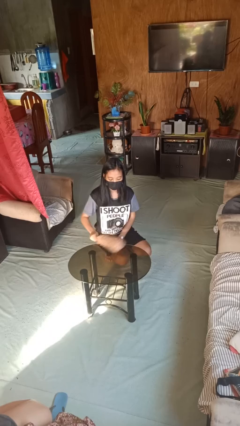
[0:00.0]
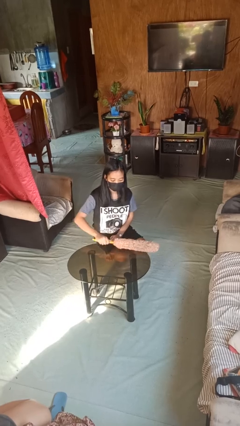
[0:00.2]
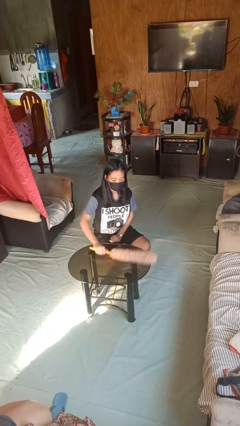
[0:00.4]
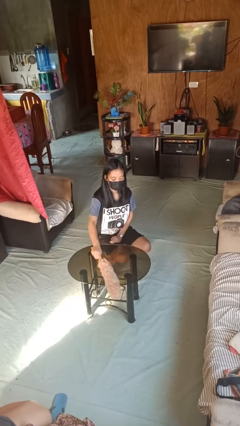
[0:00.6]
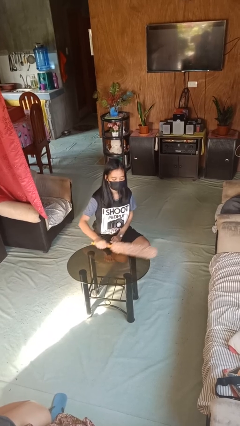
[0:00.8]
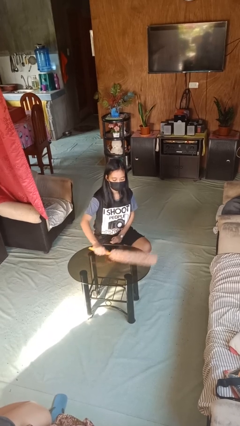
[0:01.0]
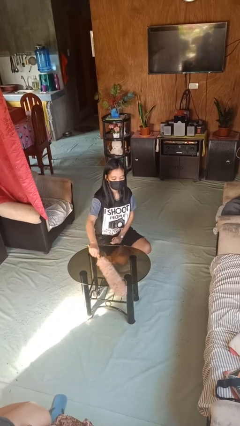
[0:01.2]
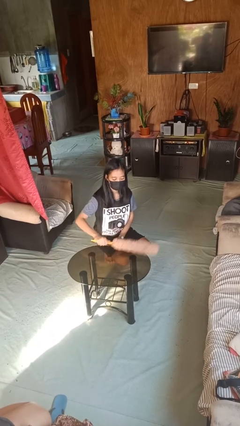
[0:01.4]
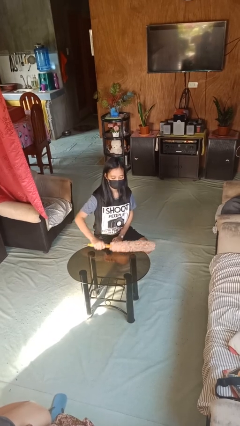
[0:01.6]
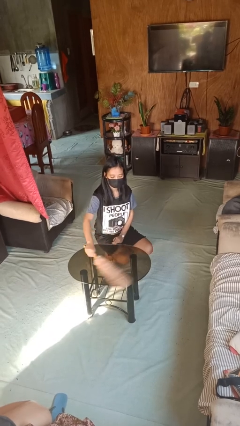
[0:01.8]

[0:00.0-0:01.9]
person dusts furniture

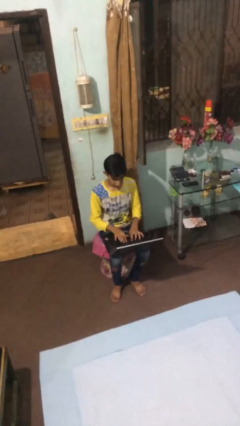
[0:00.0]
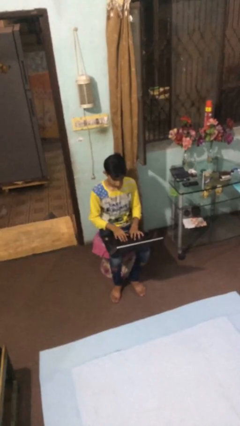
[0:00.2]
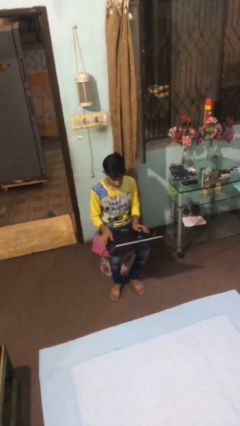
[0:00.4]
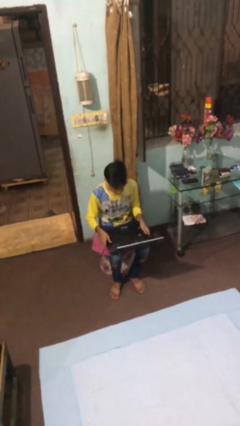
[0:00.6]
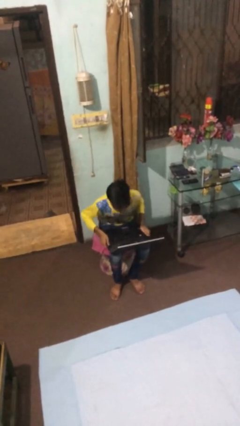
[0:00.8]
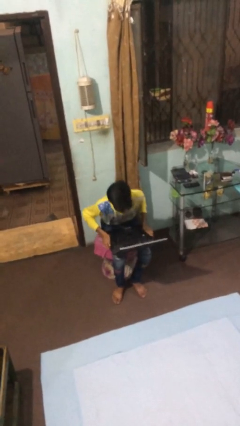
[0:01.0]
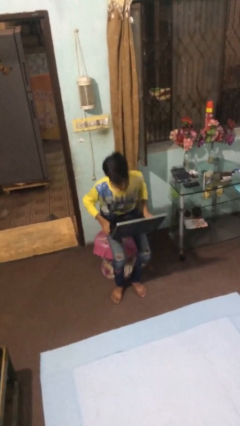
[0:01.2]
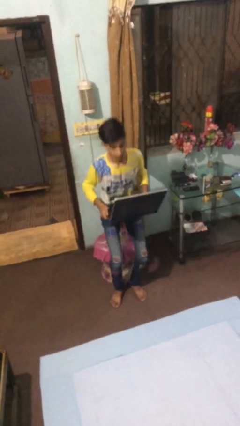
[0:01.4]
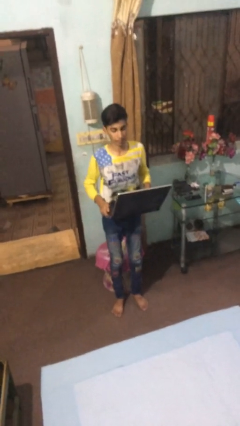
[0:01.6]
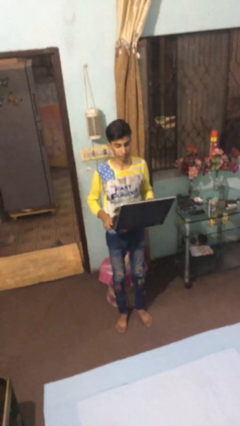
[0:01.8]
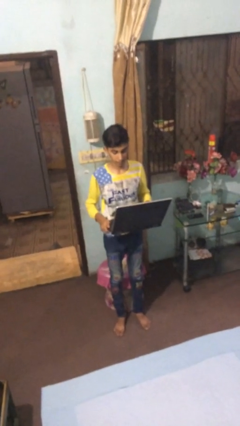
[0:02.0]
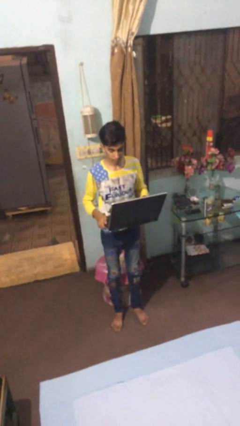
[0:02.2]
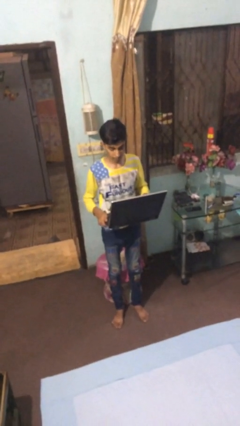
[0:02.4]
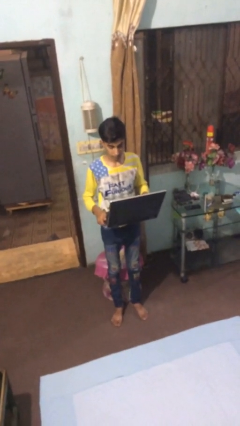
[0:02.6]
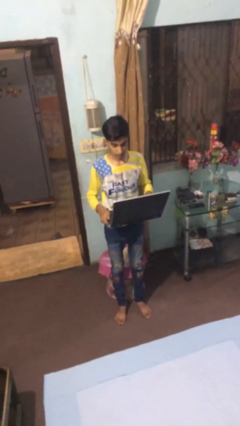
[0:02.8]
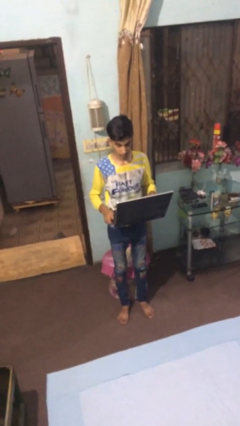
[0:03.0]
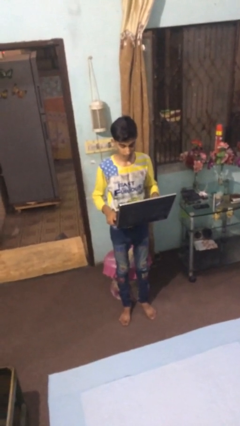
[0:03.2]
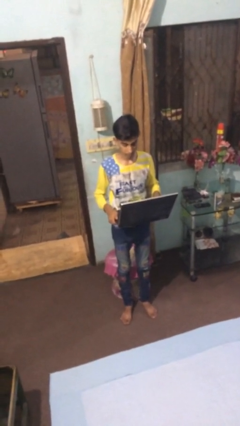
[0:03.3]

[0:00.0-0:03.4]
person stands up

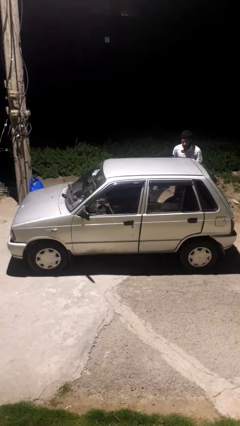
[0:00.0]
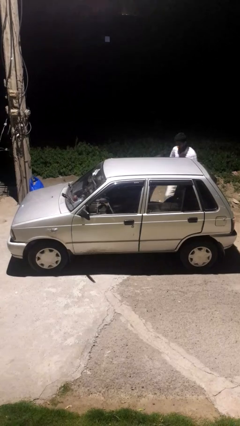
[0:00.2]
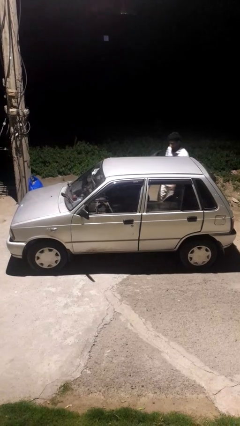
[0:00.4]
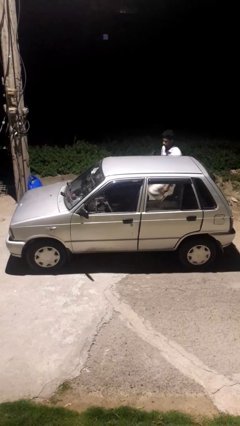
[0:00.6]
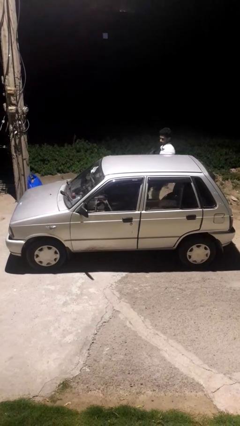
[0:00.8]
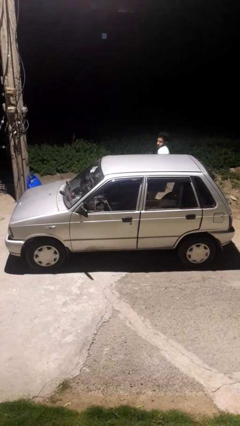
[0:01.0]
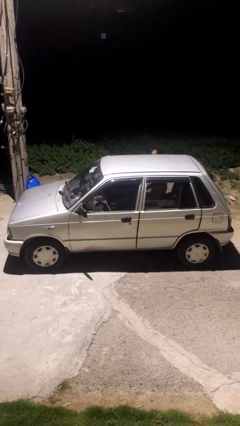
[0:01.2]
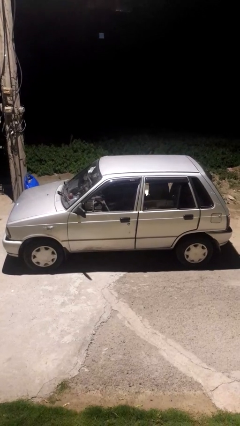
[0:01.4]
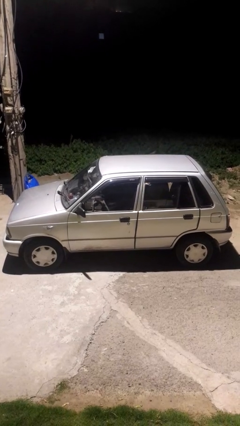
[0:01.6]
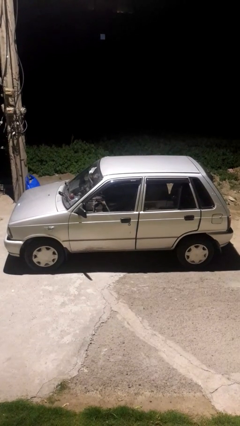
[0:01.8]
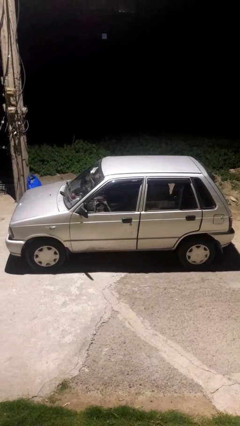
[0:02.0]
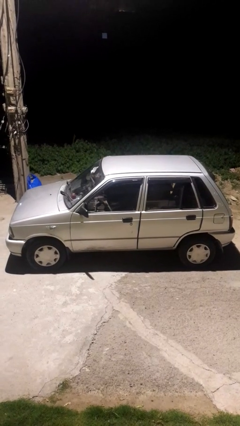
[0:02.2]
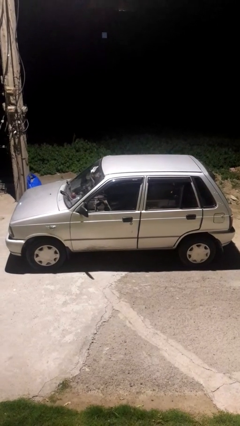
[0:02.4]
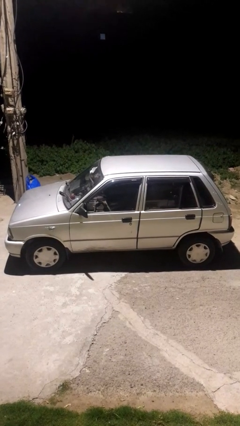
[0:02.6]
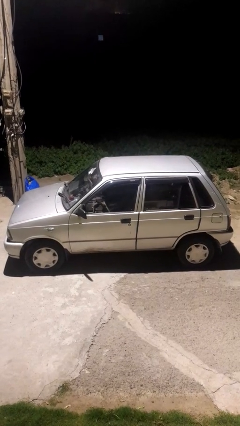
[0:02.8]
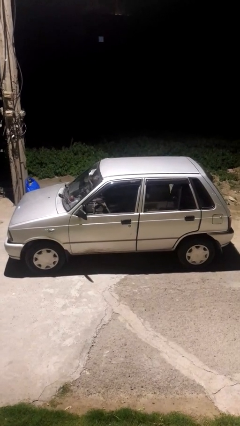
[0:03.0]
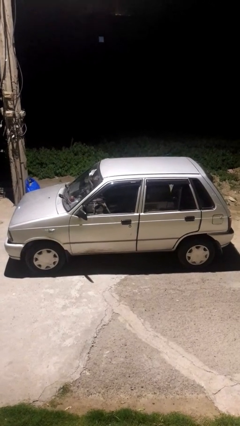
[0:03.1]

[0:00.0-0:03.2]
car picks up person

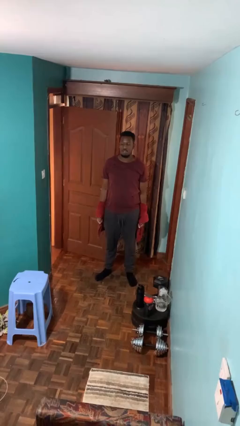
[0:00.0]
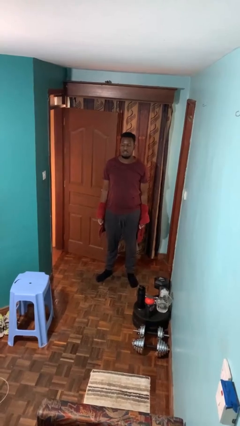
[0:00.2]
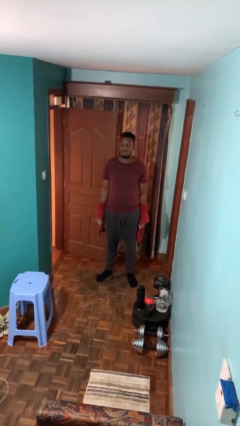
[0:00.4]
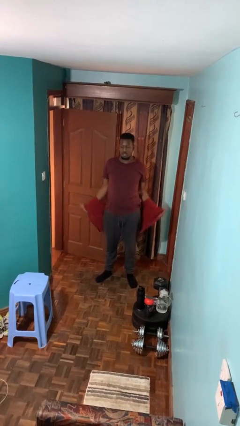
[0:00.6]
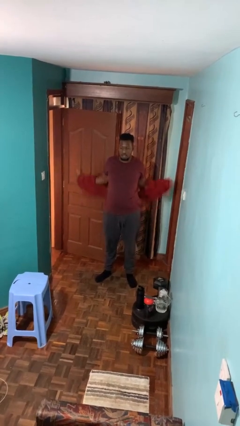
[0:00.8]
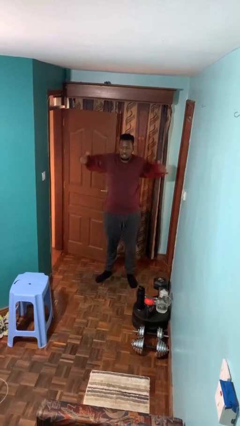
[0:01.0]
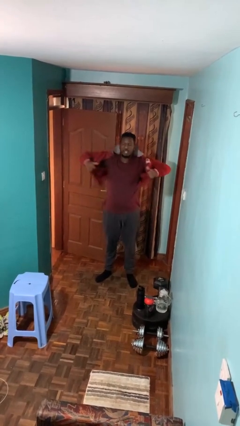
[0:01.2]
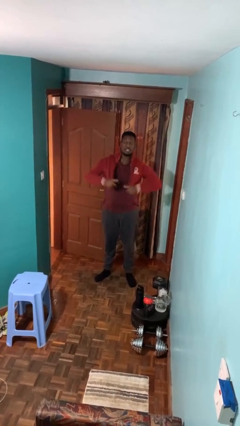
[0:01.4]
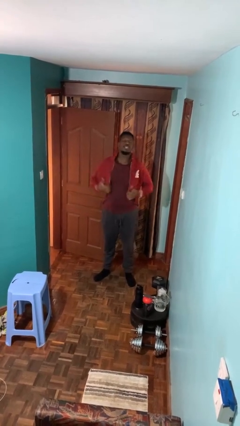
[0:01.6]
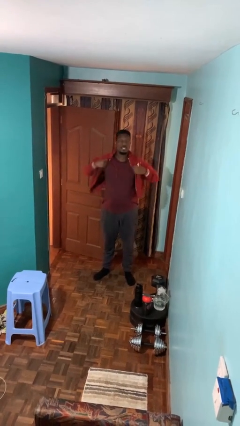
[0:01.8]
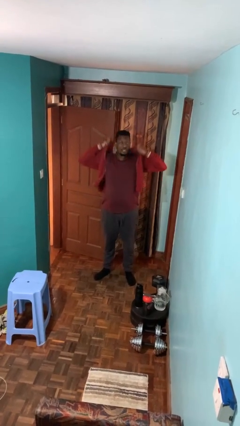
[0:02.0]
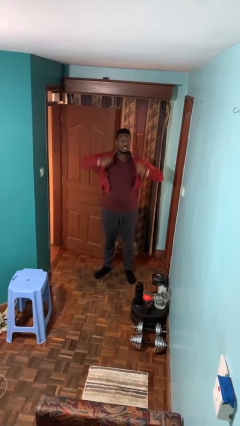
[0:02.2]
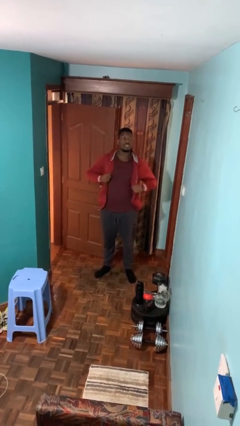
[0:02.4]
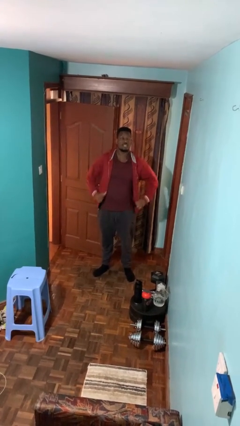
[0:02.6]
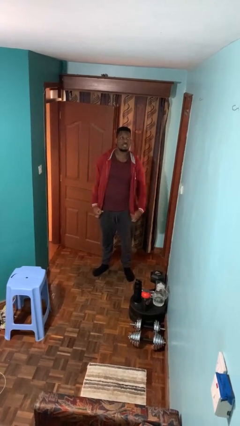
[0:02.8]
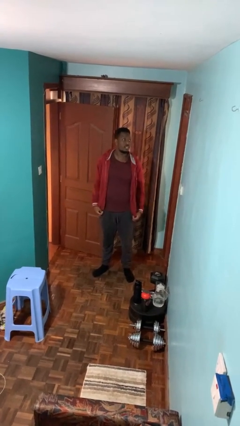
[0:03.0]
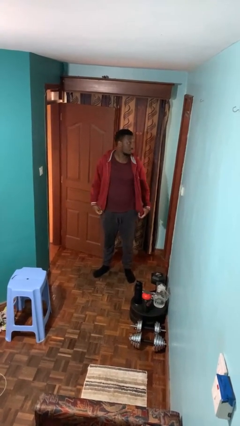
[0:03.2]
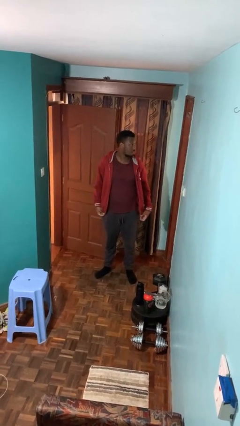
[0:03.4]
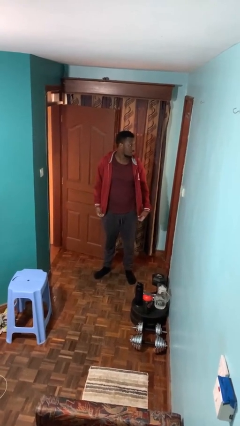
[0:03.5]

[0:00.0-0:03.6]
person puts on jacket

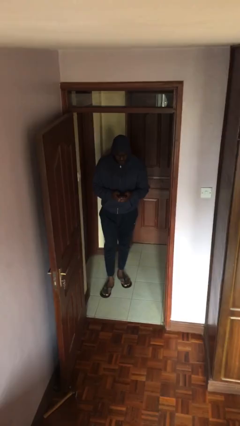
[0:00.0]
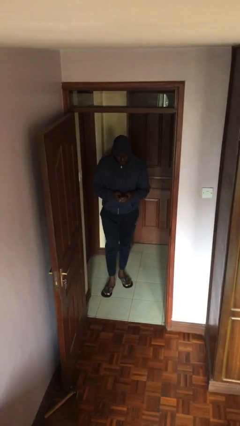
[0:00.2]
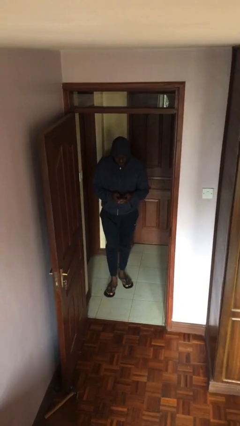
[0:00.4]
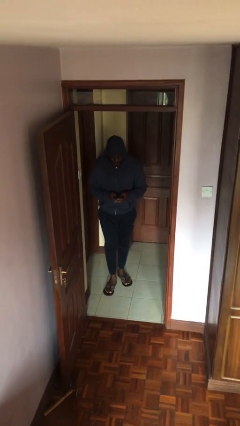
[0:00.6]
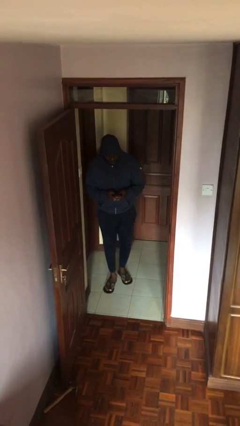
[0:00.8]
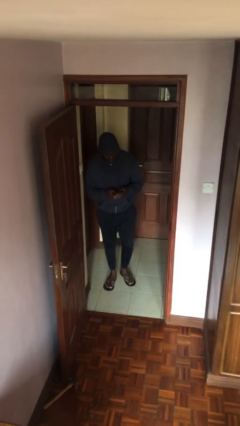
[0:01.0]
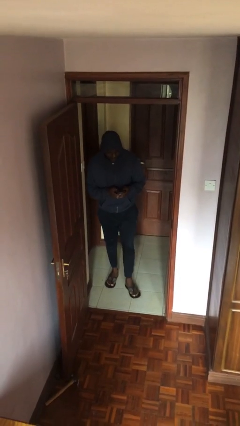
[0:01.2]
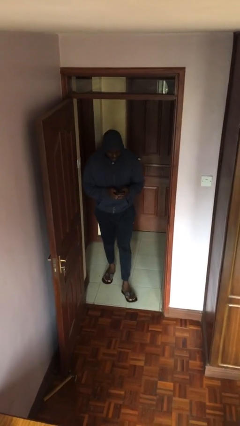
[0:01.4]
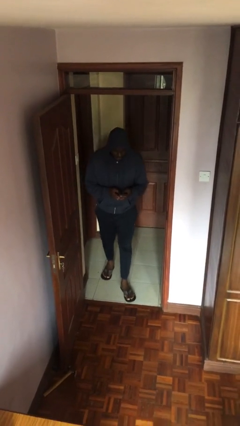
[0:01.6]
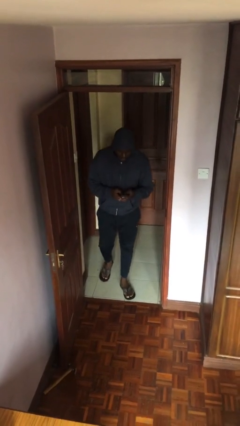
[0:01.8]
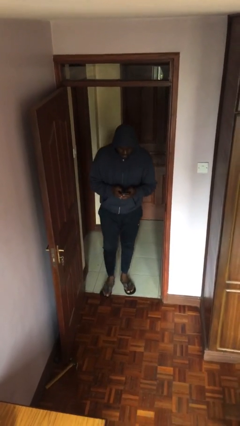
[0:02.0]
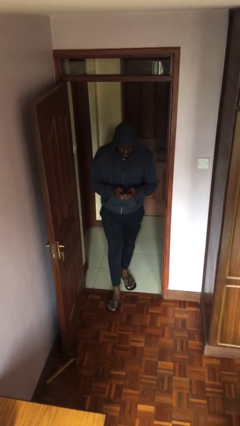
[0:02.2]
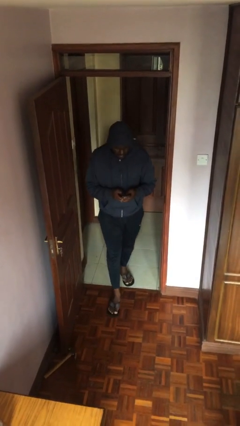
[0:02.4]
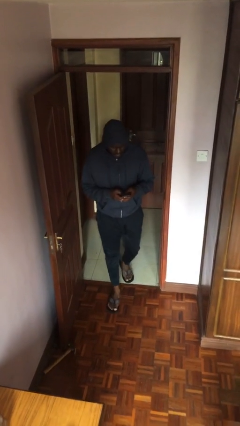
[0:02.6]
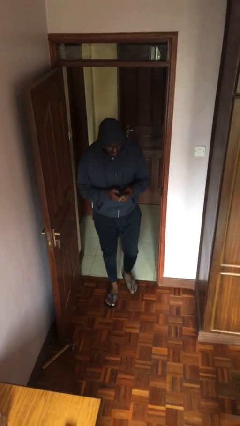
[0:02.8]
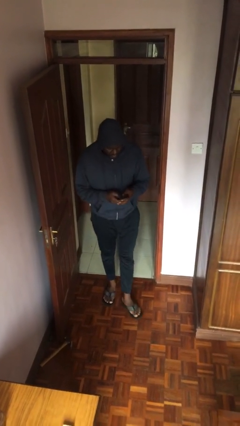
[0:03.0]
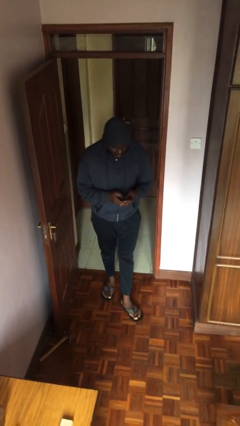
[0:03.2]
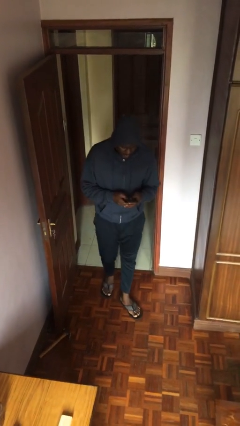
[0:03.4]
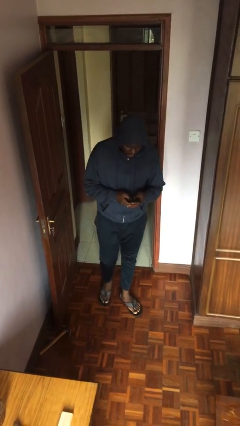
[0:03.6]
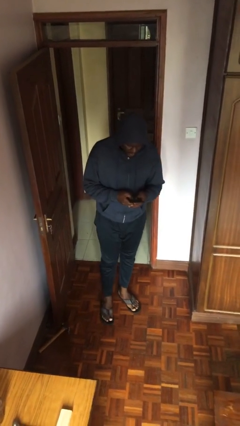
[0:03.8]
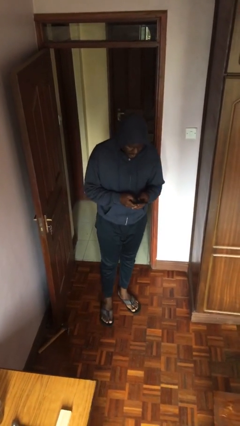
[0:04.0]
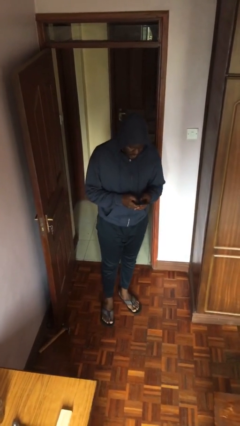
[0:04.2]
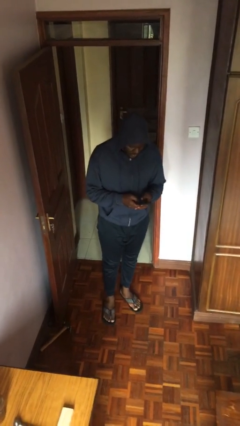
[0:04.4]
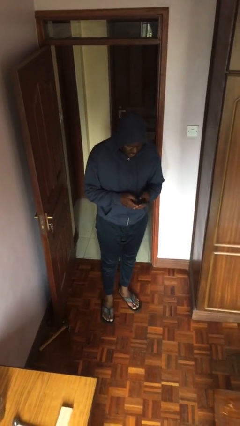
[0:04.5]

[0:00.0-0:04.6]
person enters scene through structure

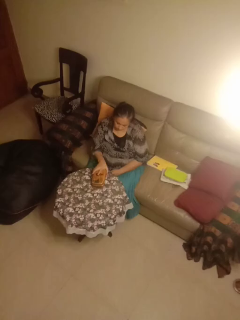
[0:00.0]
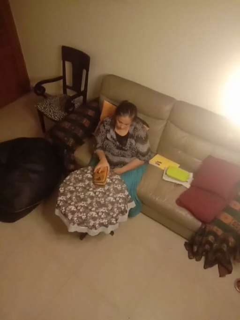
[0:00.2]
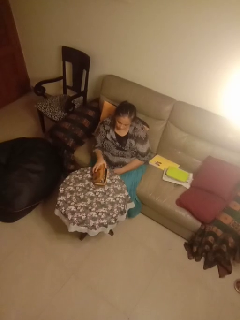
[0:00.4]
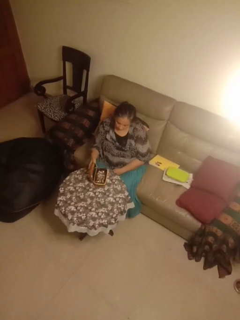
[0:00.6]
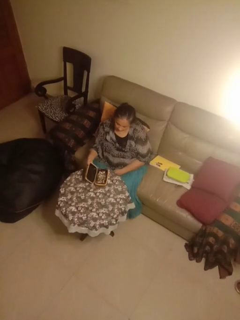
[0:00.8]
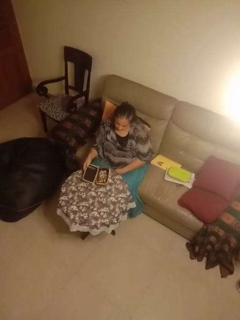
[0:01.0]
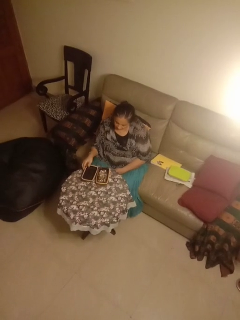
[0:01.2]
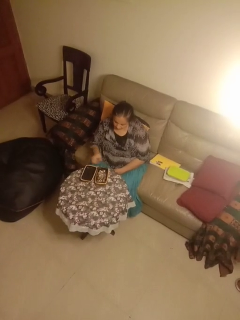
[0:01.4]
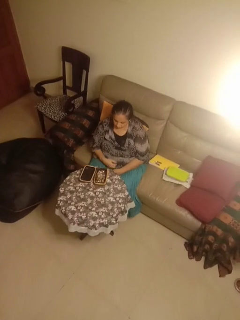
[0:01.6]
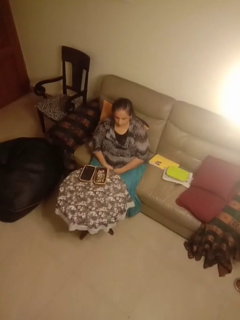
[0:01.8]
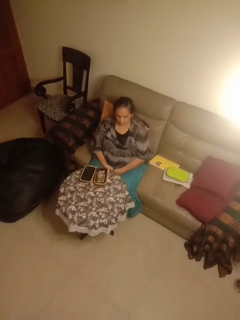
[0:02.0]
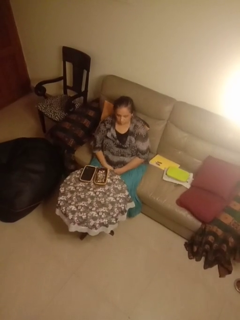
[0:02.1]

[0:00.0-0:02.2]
person opens jewelry box
